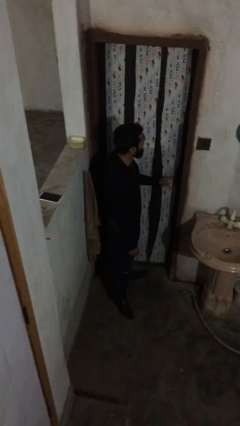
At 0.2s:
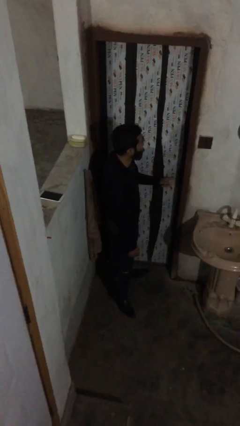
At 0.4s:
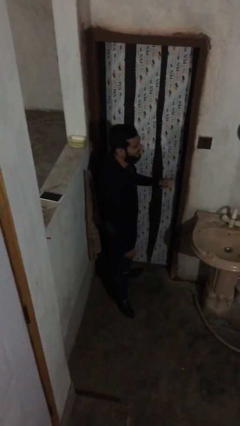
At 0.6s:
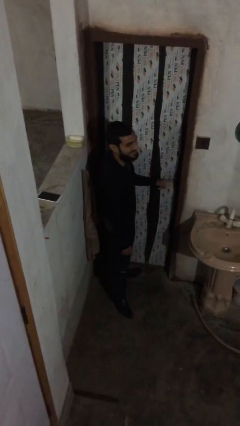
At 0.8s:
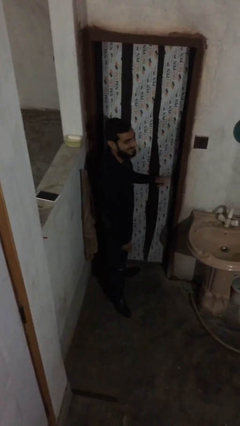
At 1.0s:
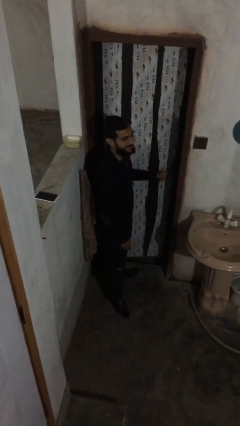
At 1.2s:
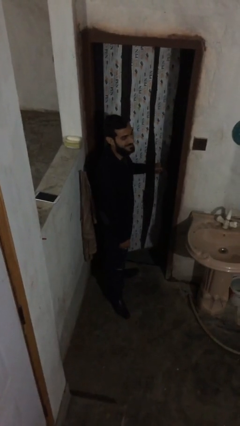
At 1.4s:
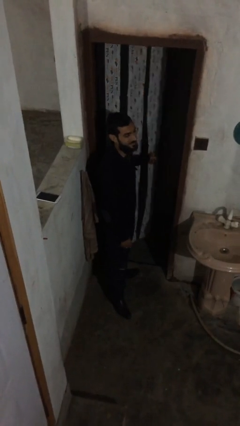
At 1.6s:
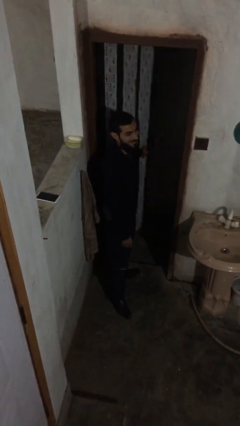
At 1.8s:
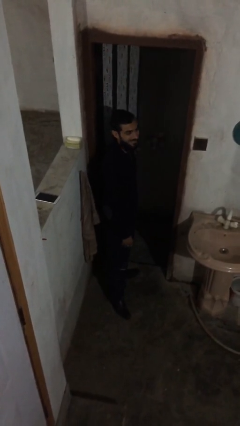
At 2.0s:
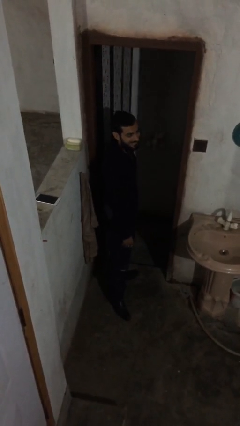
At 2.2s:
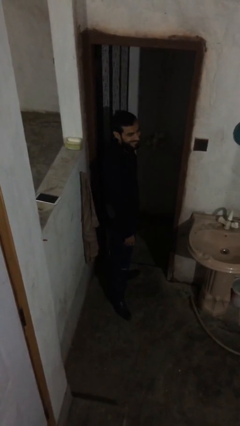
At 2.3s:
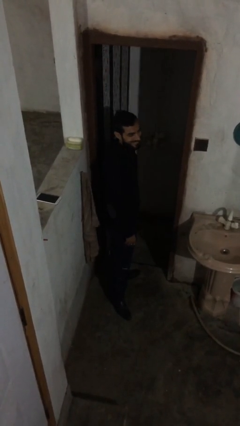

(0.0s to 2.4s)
person opens facility door

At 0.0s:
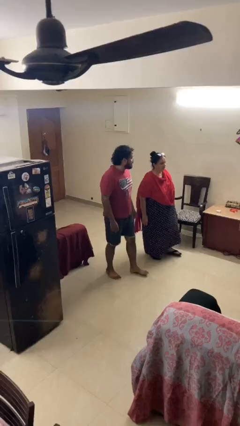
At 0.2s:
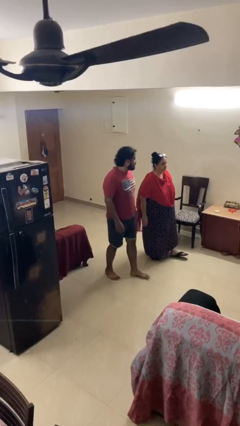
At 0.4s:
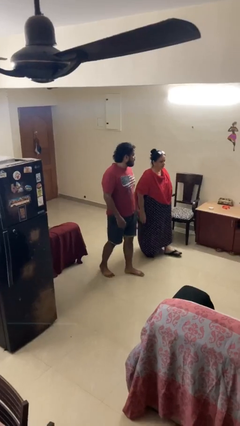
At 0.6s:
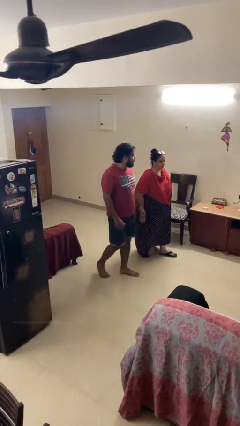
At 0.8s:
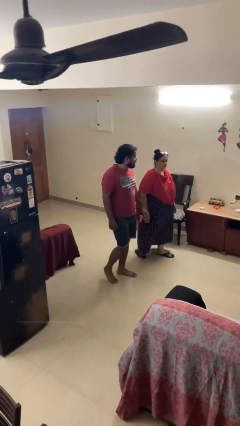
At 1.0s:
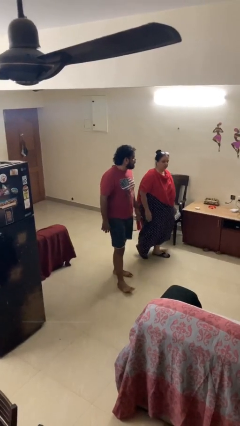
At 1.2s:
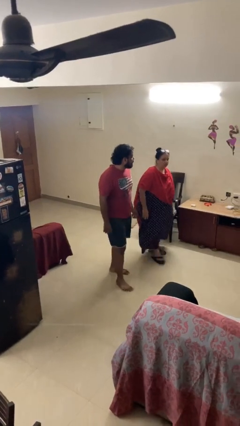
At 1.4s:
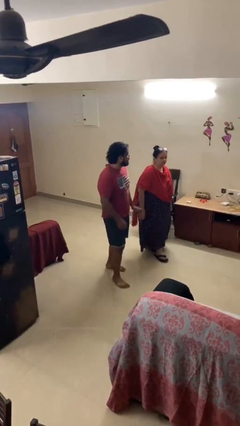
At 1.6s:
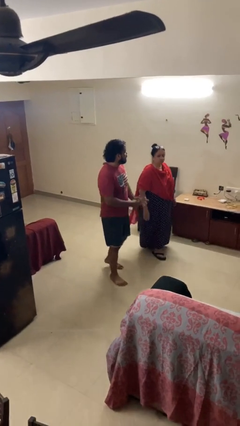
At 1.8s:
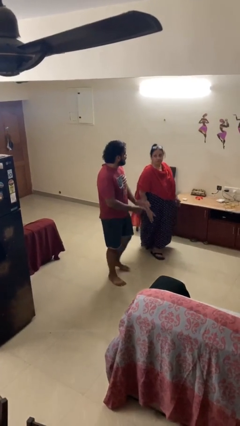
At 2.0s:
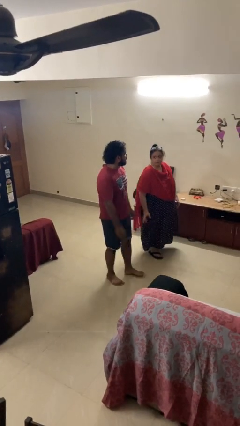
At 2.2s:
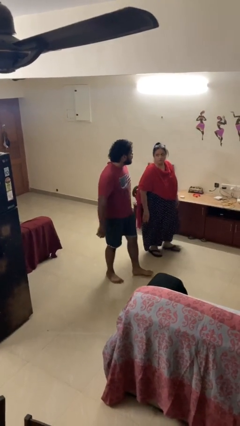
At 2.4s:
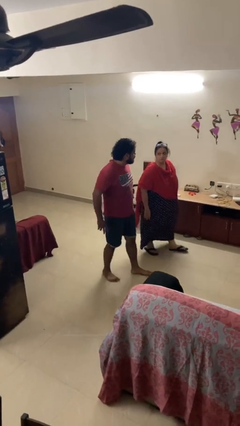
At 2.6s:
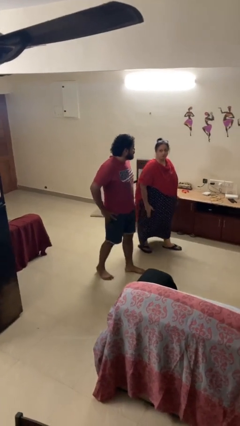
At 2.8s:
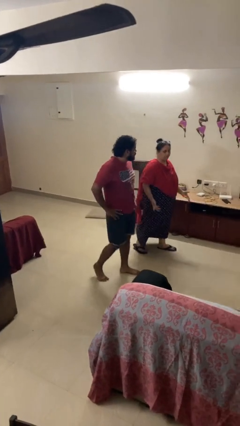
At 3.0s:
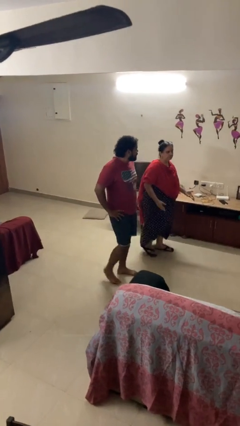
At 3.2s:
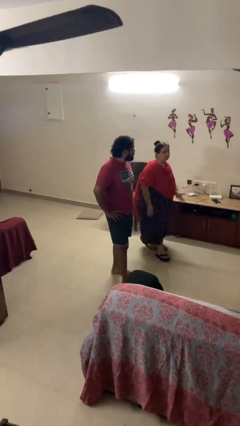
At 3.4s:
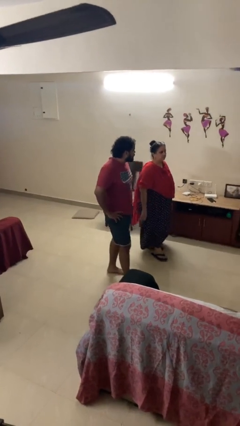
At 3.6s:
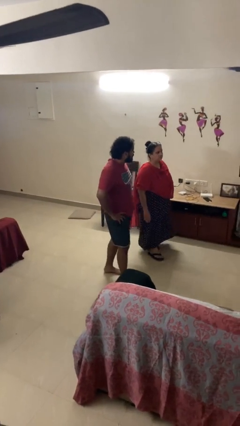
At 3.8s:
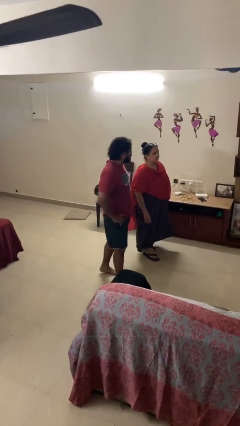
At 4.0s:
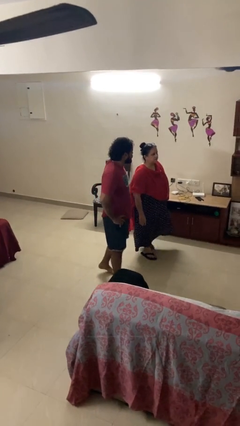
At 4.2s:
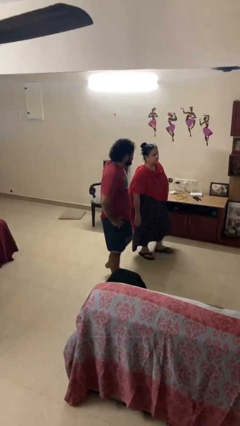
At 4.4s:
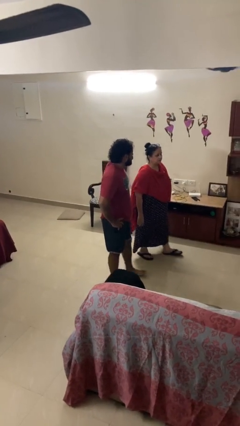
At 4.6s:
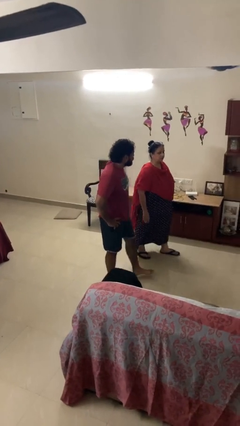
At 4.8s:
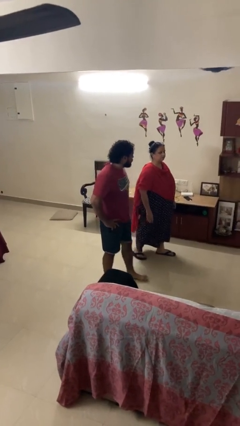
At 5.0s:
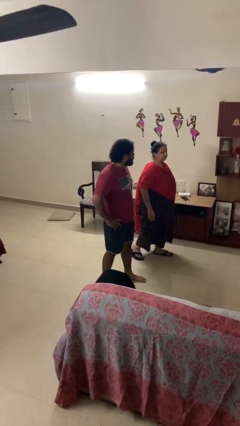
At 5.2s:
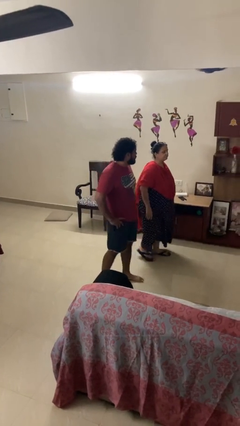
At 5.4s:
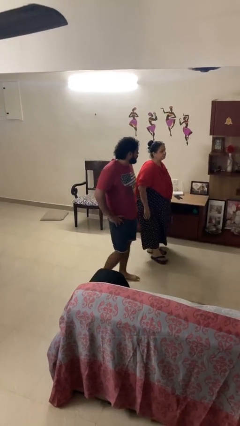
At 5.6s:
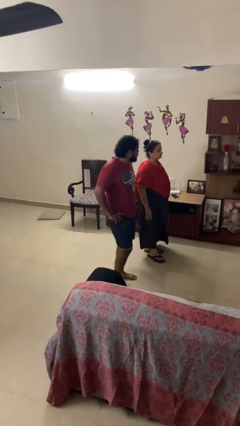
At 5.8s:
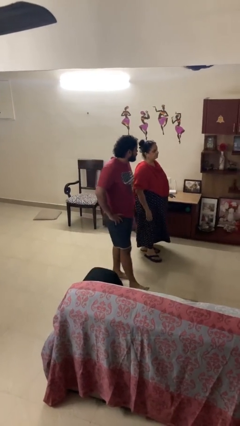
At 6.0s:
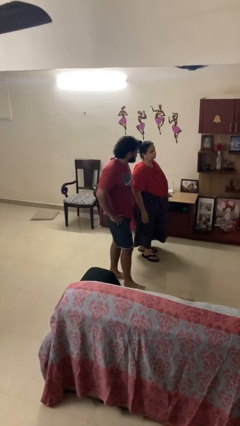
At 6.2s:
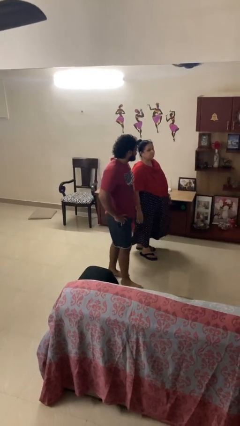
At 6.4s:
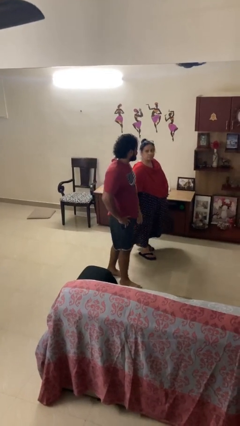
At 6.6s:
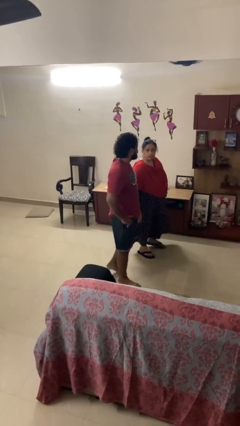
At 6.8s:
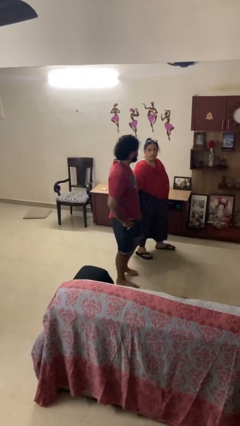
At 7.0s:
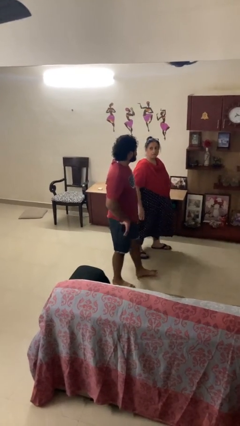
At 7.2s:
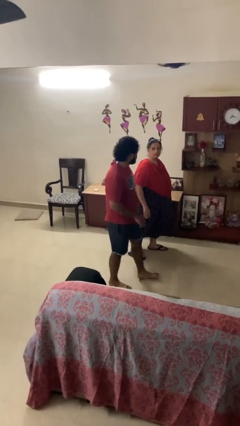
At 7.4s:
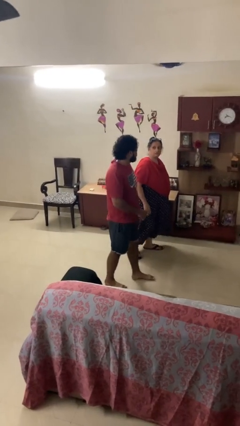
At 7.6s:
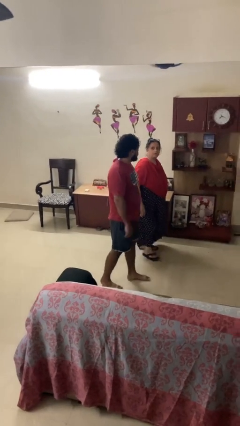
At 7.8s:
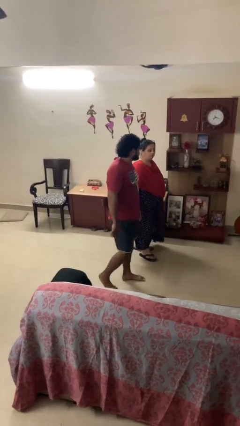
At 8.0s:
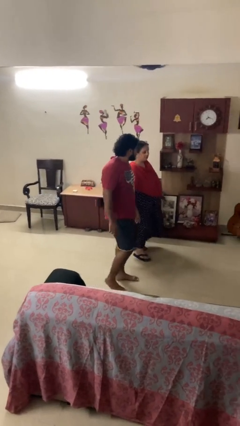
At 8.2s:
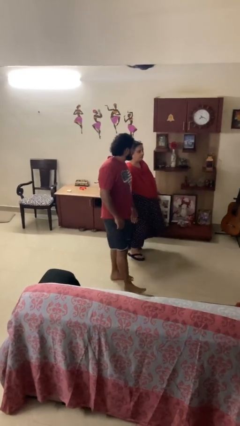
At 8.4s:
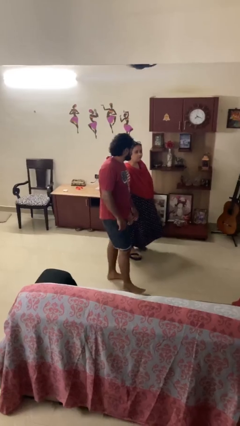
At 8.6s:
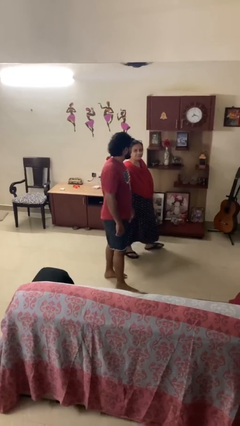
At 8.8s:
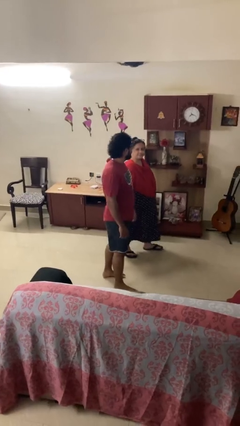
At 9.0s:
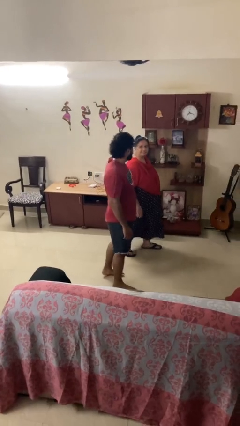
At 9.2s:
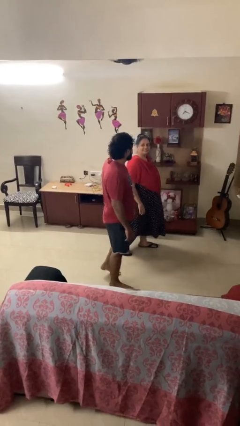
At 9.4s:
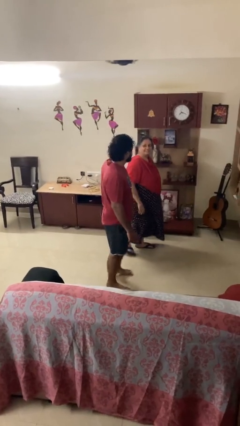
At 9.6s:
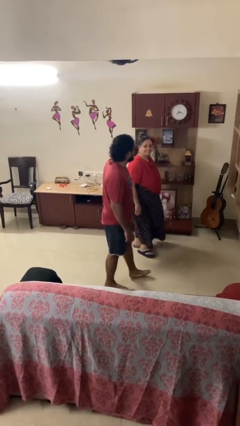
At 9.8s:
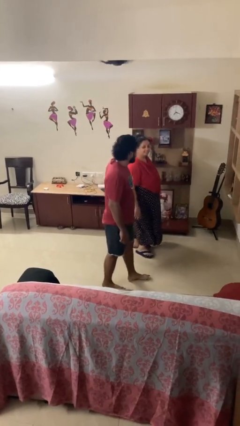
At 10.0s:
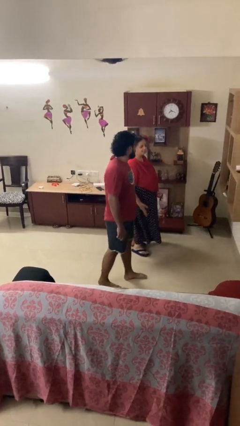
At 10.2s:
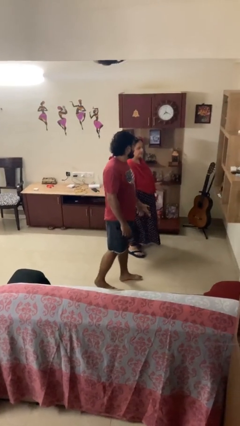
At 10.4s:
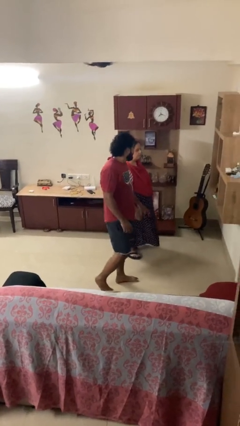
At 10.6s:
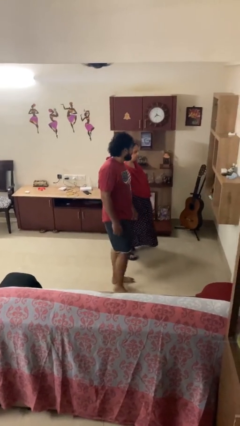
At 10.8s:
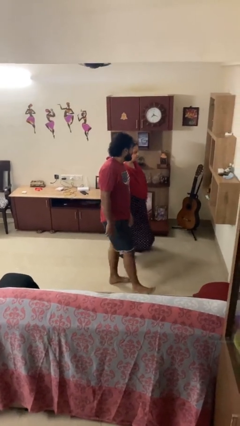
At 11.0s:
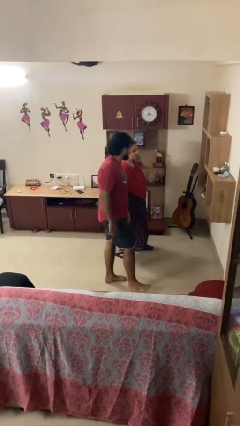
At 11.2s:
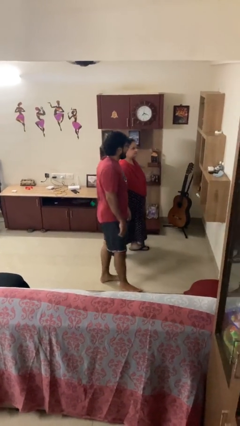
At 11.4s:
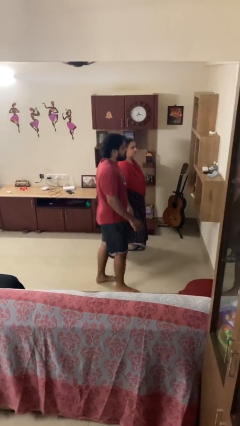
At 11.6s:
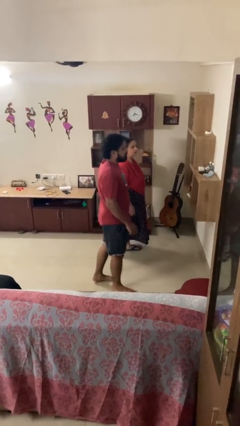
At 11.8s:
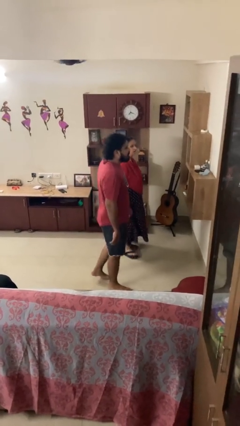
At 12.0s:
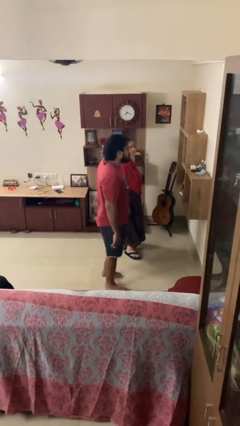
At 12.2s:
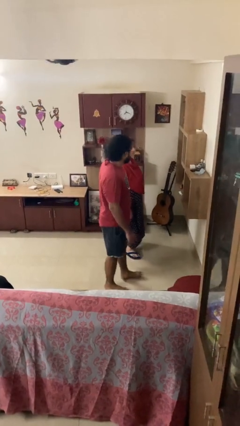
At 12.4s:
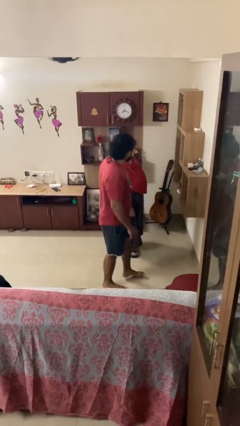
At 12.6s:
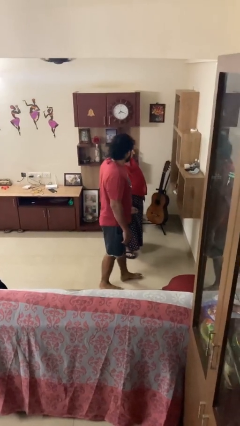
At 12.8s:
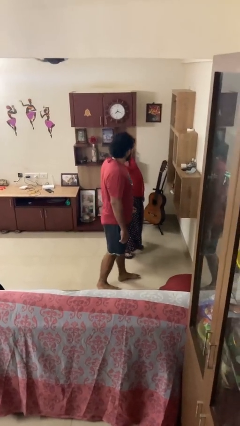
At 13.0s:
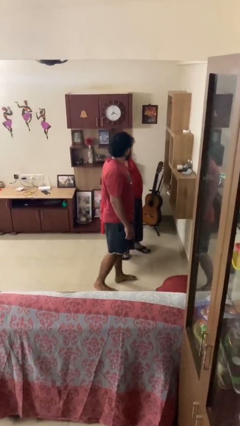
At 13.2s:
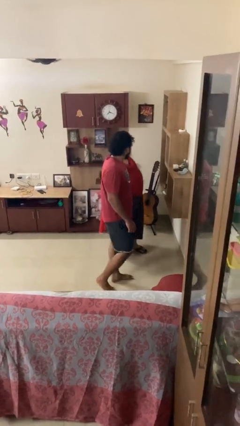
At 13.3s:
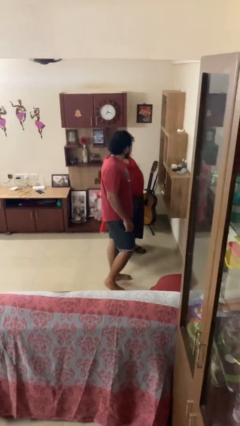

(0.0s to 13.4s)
person talks to person

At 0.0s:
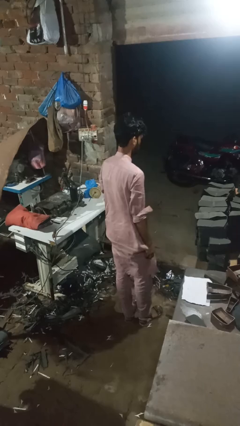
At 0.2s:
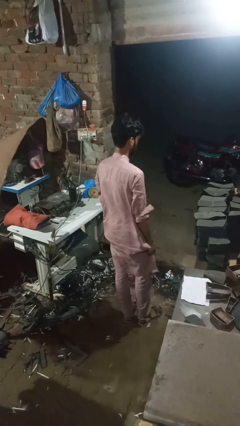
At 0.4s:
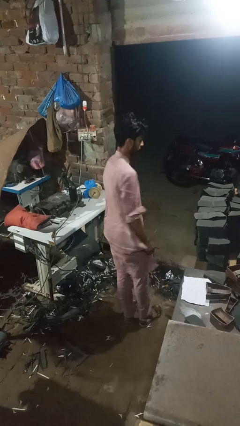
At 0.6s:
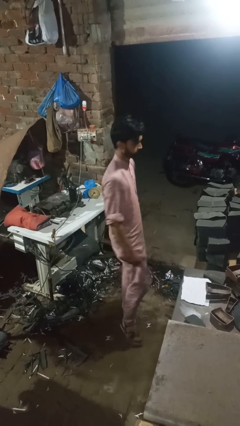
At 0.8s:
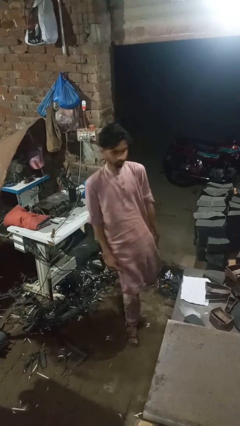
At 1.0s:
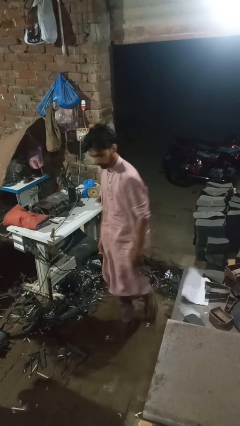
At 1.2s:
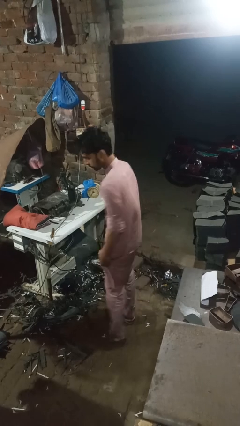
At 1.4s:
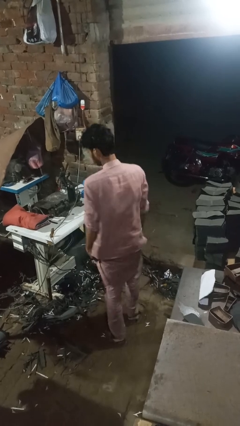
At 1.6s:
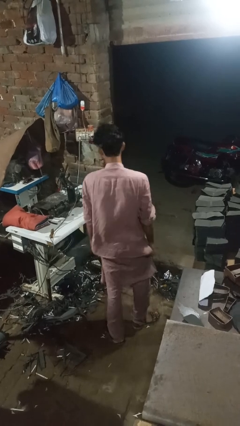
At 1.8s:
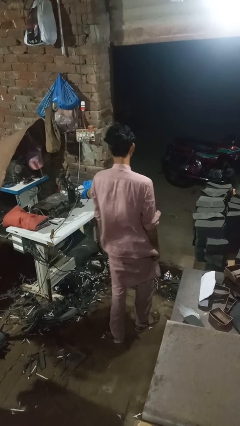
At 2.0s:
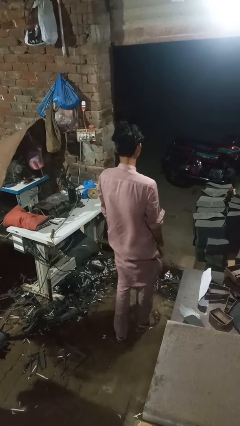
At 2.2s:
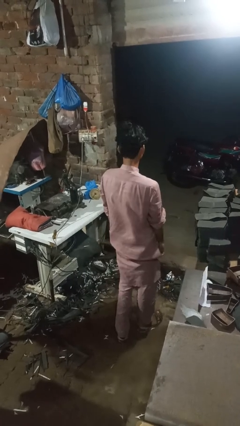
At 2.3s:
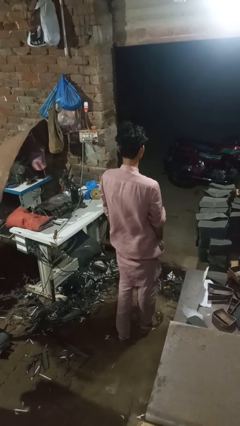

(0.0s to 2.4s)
person twirls
